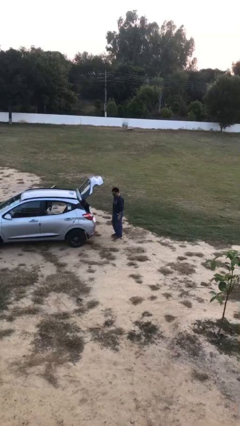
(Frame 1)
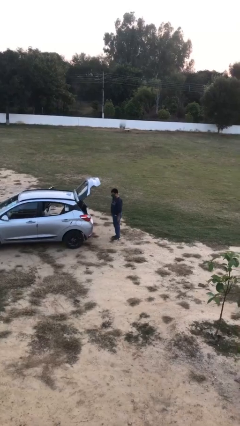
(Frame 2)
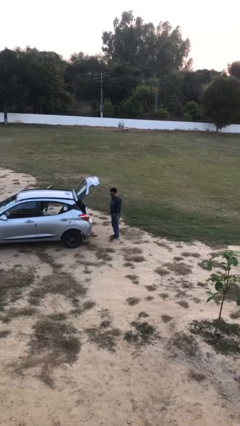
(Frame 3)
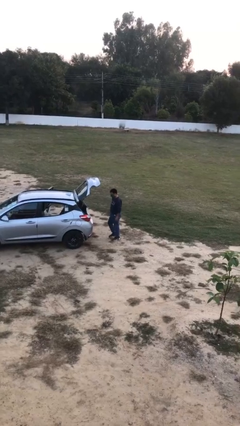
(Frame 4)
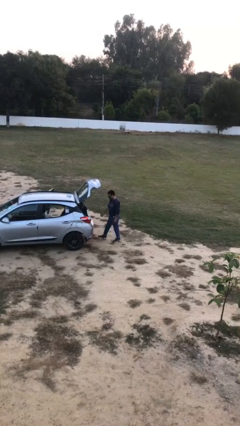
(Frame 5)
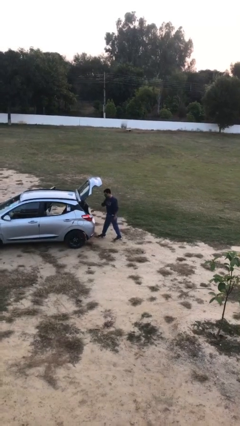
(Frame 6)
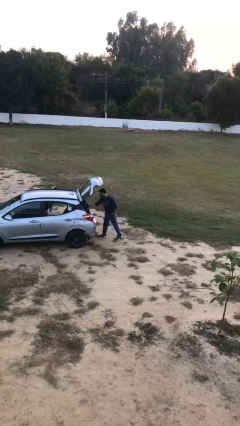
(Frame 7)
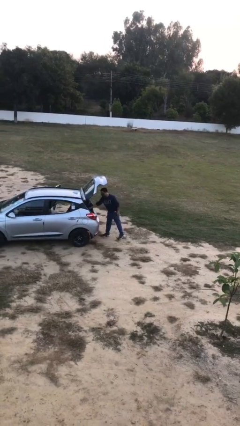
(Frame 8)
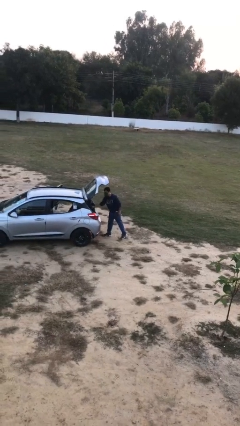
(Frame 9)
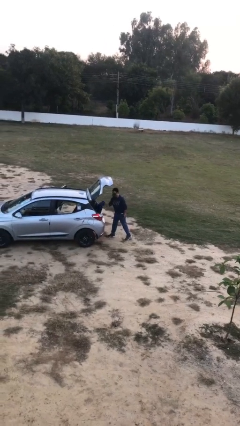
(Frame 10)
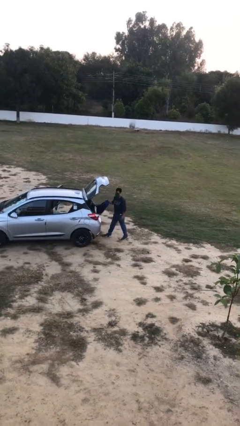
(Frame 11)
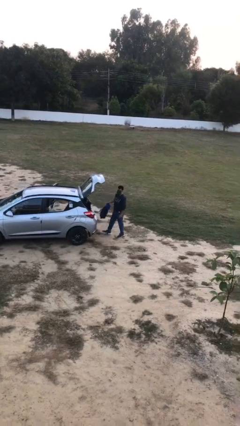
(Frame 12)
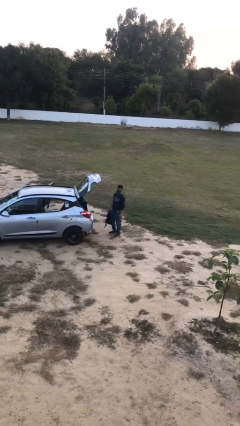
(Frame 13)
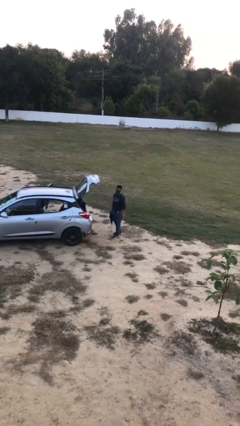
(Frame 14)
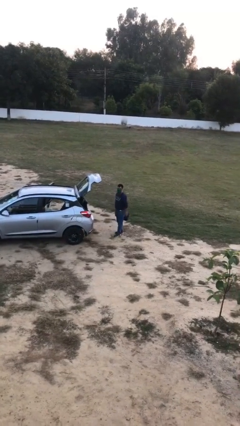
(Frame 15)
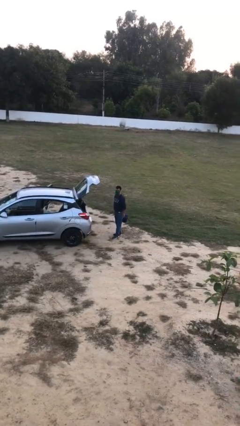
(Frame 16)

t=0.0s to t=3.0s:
person unloads car

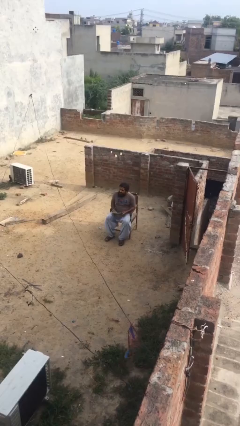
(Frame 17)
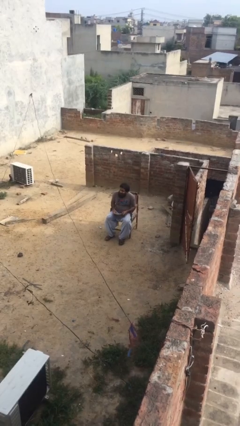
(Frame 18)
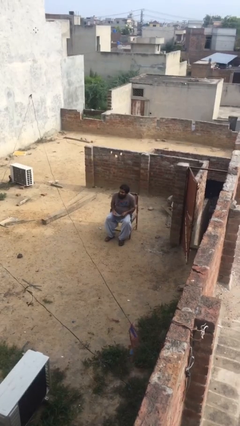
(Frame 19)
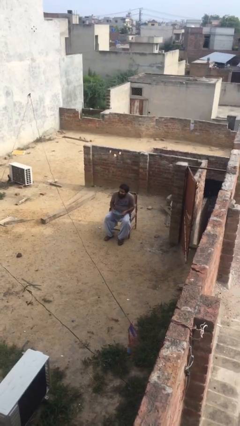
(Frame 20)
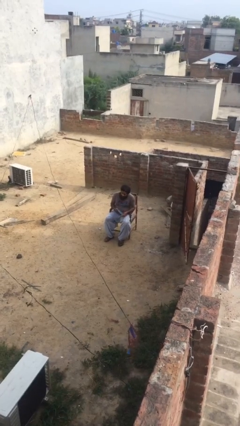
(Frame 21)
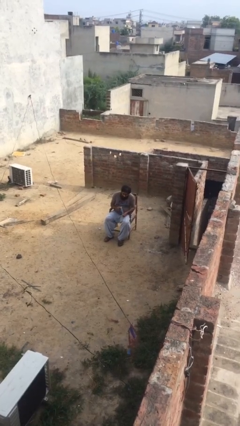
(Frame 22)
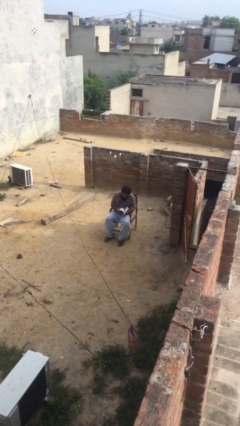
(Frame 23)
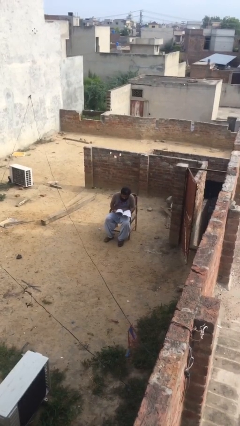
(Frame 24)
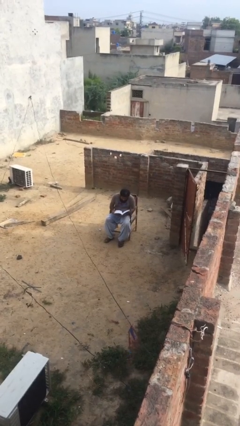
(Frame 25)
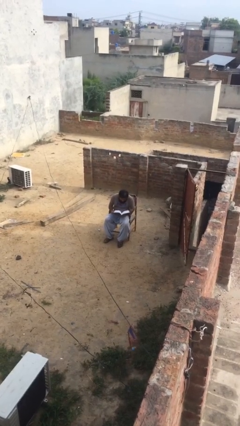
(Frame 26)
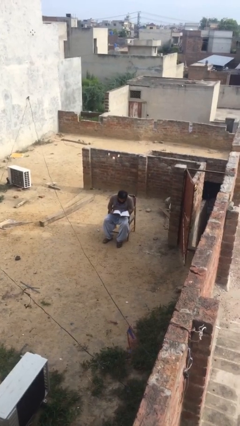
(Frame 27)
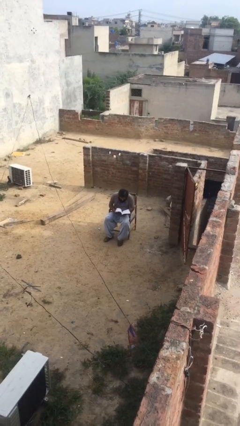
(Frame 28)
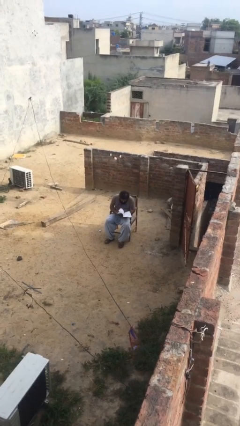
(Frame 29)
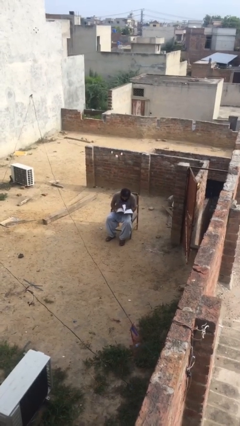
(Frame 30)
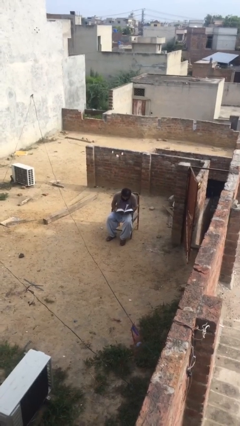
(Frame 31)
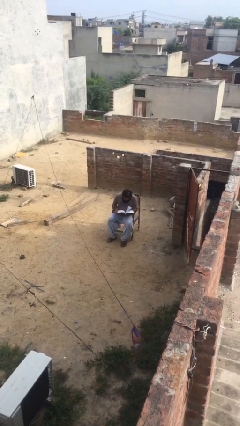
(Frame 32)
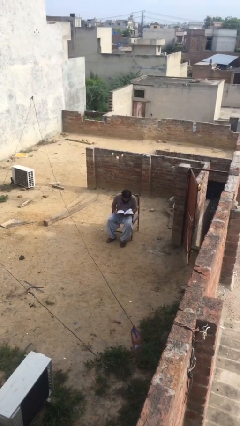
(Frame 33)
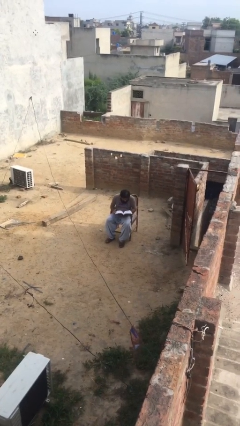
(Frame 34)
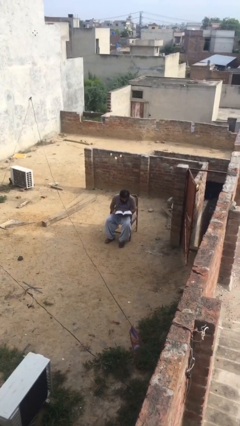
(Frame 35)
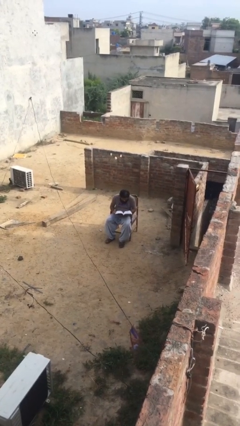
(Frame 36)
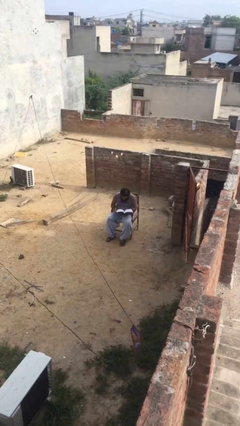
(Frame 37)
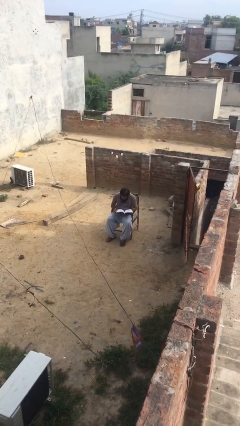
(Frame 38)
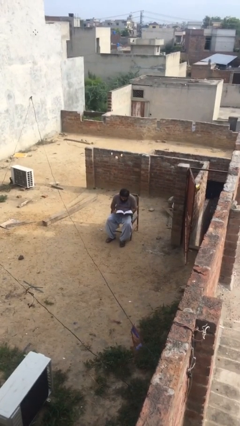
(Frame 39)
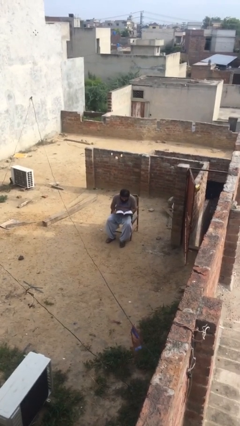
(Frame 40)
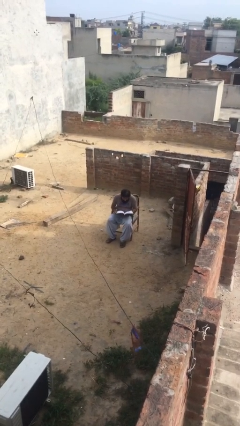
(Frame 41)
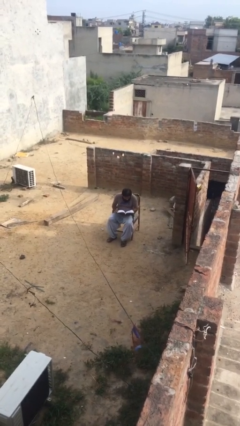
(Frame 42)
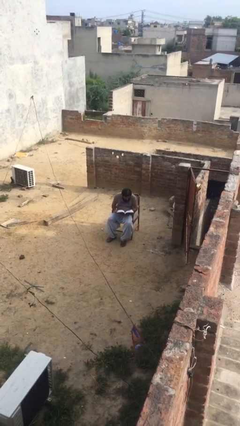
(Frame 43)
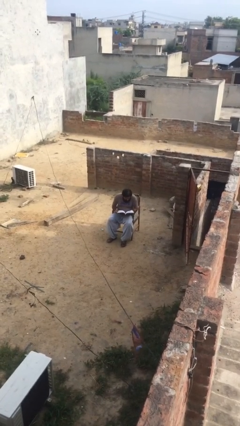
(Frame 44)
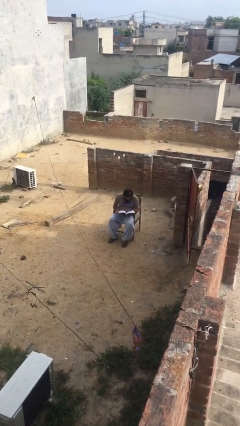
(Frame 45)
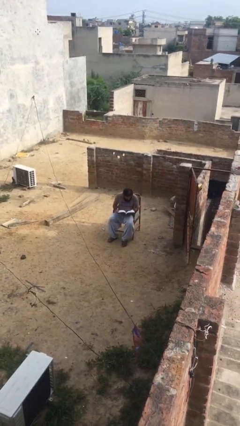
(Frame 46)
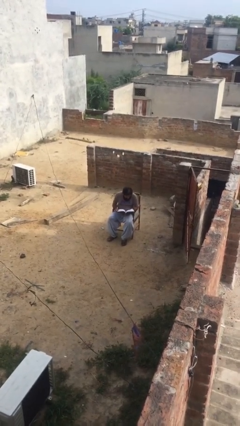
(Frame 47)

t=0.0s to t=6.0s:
person reads document

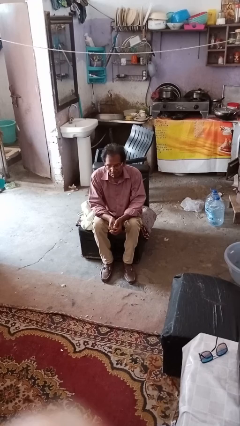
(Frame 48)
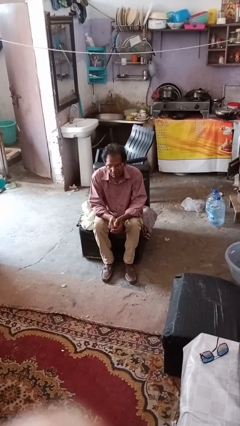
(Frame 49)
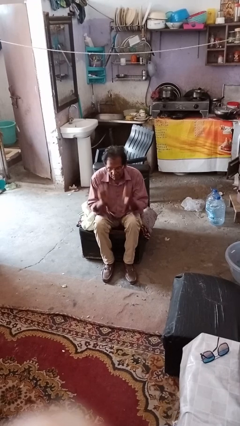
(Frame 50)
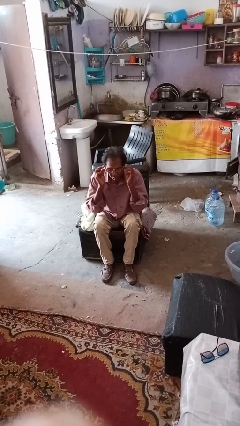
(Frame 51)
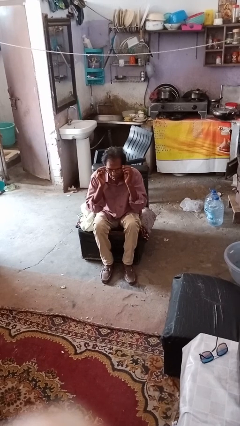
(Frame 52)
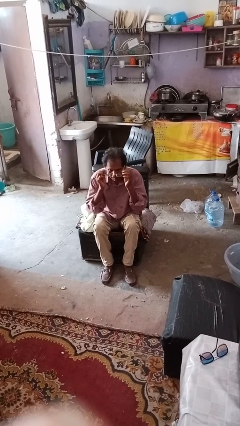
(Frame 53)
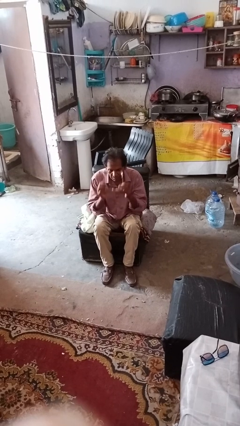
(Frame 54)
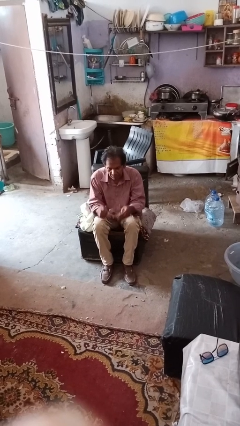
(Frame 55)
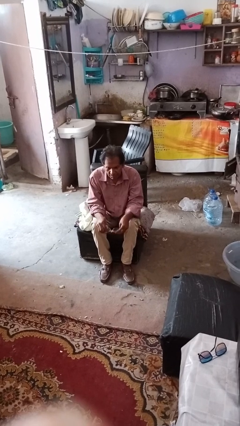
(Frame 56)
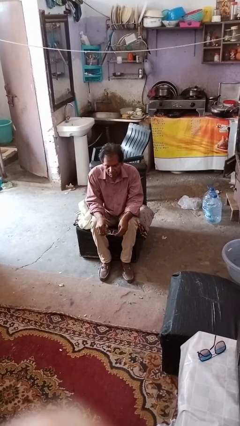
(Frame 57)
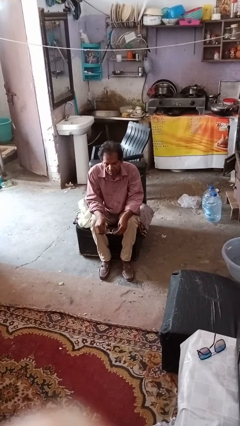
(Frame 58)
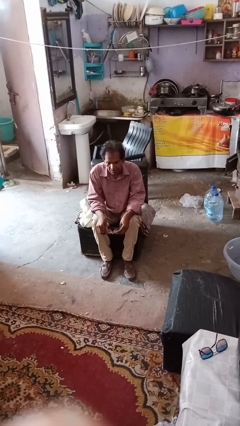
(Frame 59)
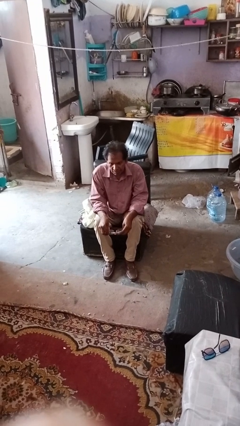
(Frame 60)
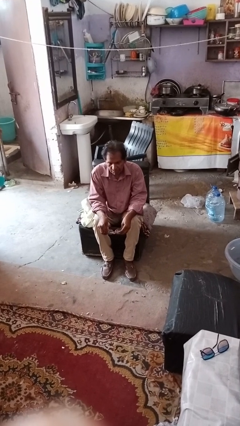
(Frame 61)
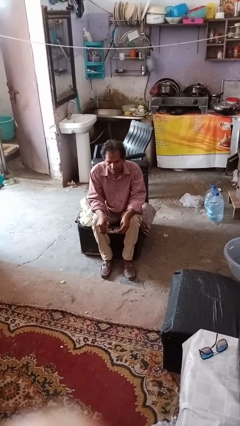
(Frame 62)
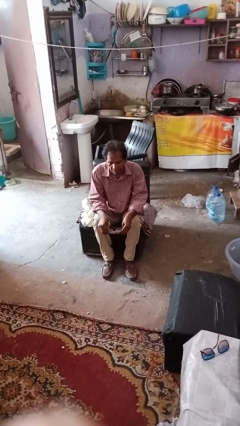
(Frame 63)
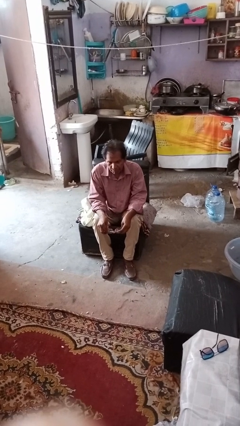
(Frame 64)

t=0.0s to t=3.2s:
person takes off glasses

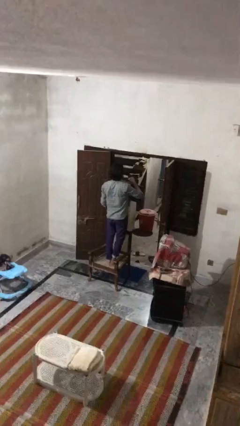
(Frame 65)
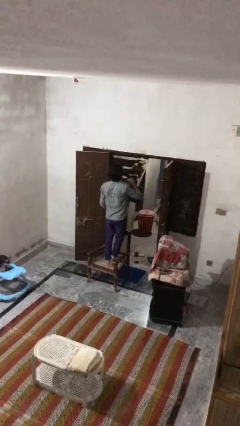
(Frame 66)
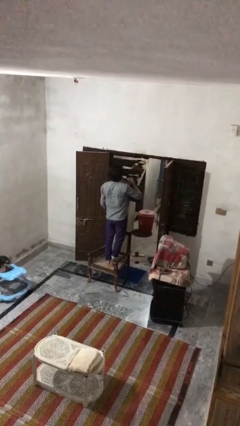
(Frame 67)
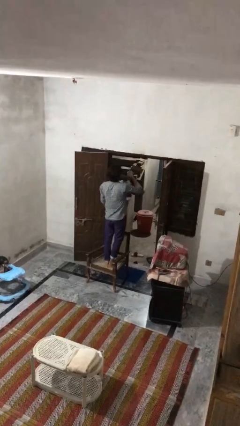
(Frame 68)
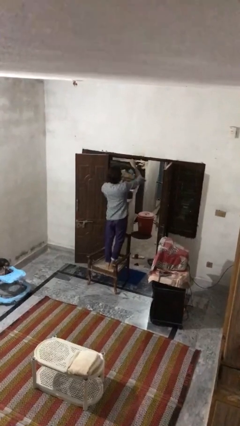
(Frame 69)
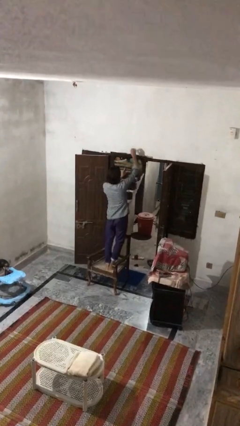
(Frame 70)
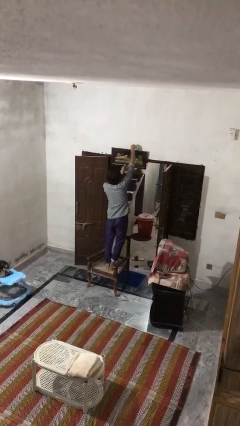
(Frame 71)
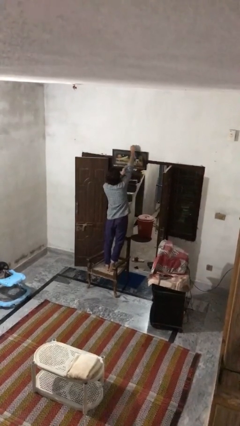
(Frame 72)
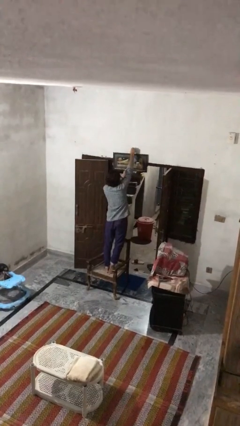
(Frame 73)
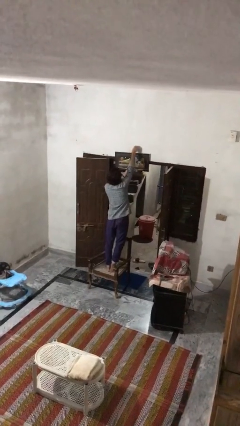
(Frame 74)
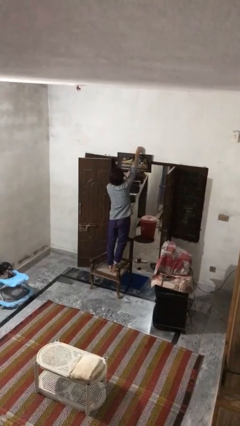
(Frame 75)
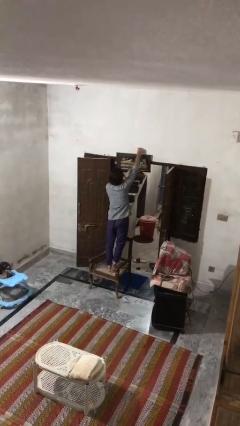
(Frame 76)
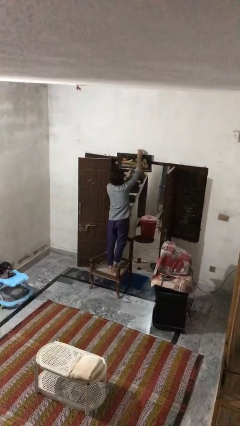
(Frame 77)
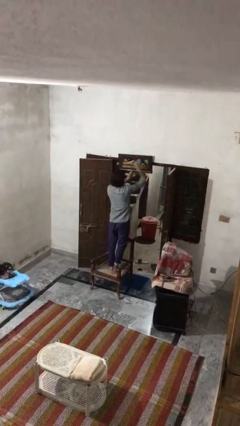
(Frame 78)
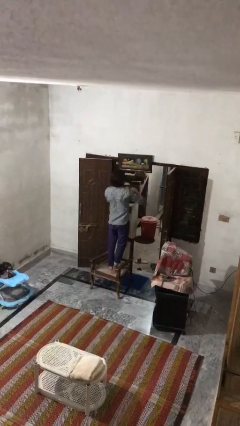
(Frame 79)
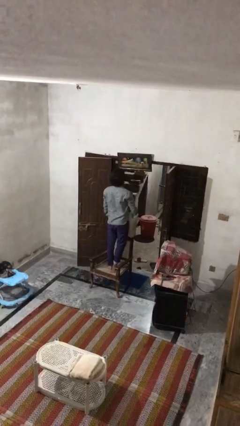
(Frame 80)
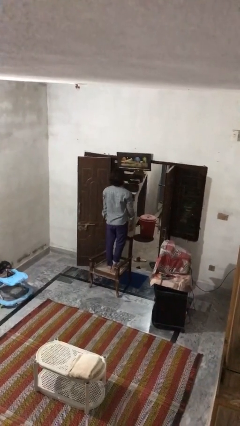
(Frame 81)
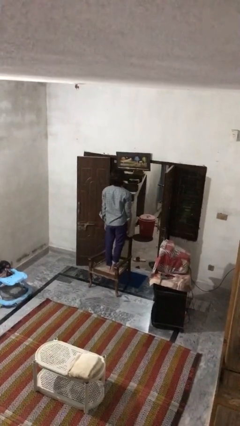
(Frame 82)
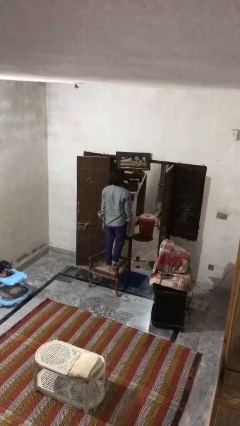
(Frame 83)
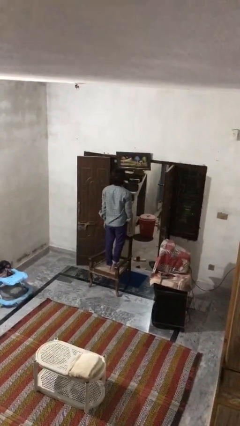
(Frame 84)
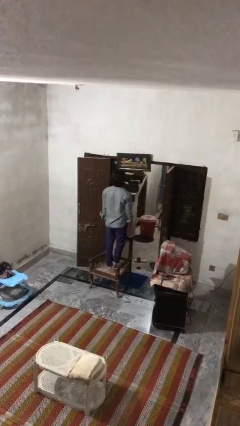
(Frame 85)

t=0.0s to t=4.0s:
person puts up picture frame

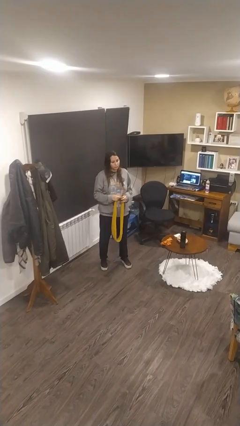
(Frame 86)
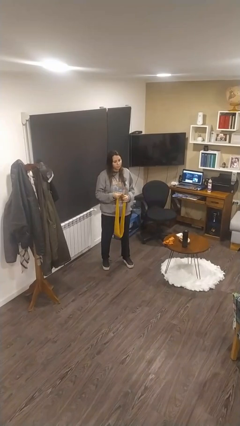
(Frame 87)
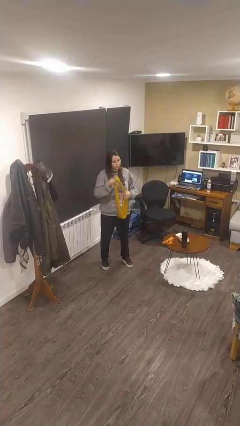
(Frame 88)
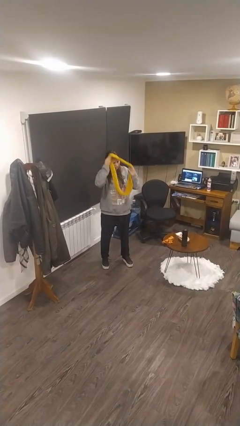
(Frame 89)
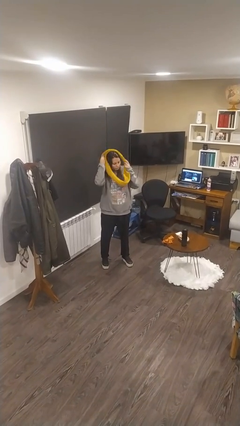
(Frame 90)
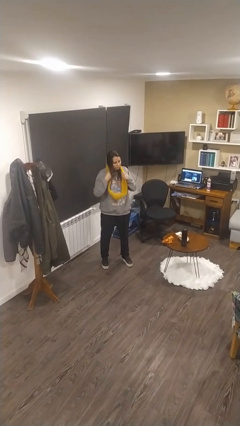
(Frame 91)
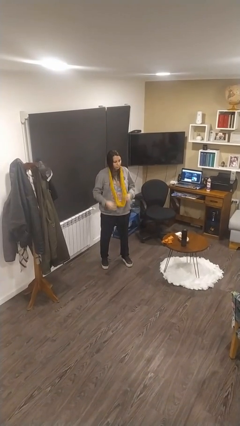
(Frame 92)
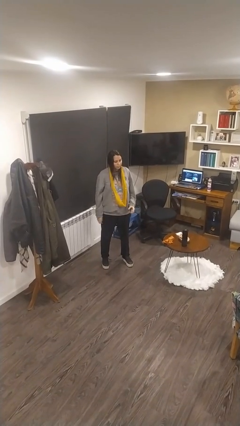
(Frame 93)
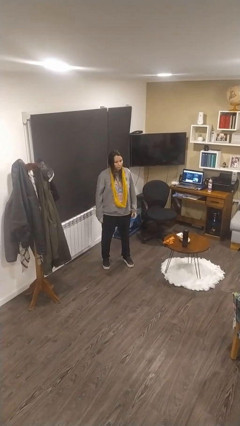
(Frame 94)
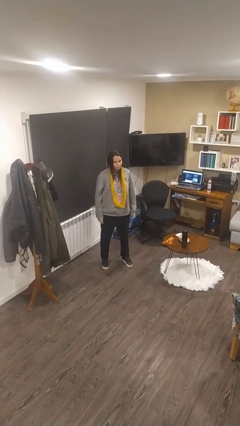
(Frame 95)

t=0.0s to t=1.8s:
person puts on scarf
